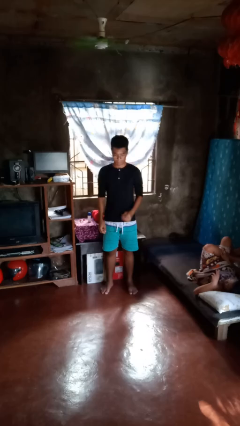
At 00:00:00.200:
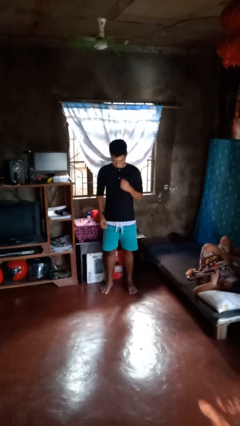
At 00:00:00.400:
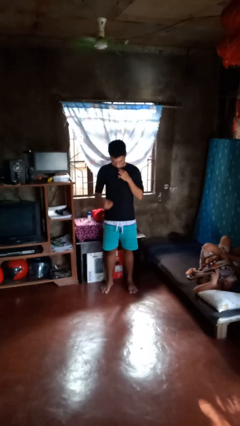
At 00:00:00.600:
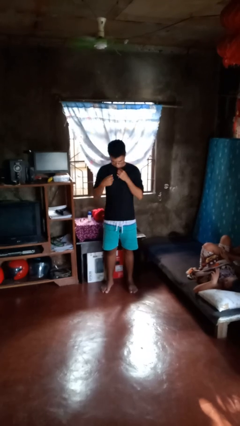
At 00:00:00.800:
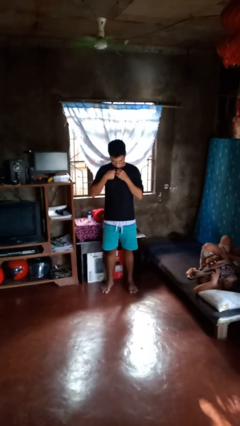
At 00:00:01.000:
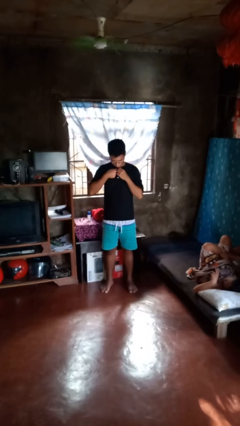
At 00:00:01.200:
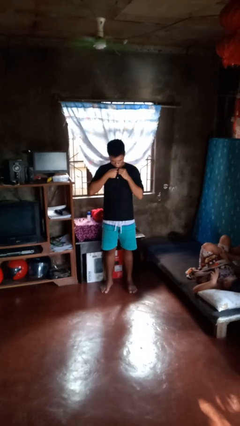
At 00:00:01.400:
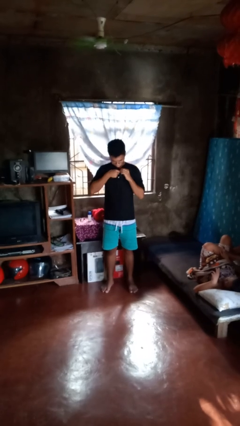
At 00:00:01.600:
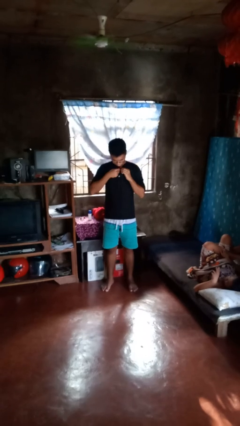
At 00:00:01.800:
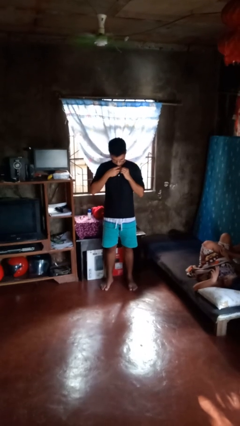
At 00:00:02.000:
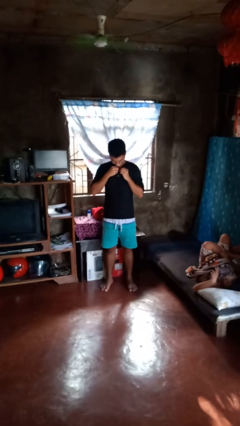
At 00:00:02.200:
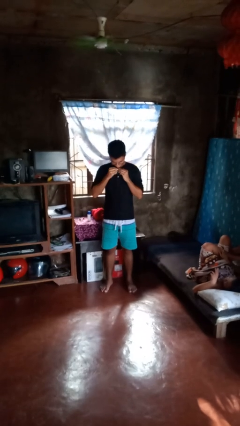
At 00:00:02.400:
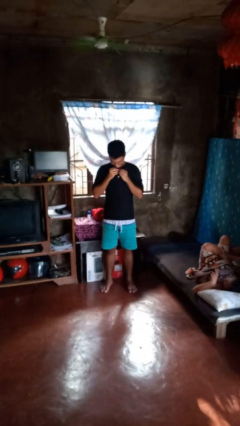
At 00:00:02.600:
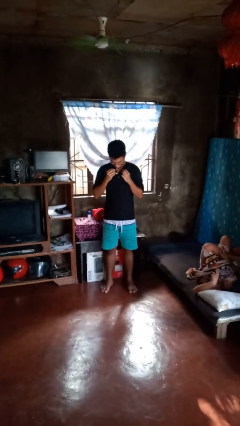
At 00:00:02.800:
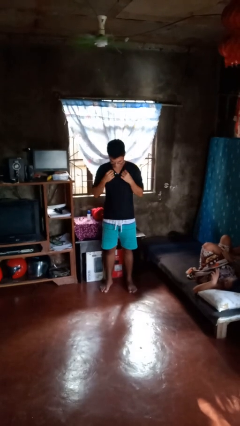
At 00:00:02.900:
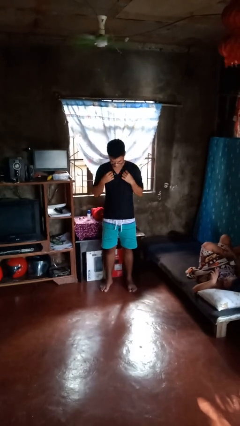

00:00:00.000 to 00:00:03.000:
person unbuttons shirt

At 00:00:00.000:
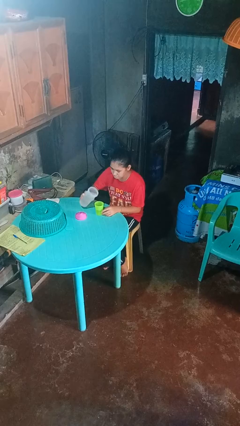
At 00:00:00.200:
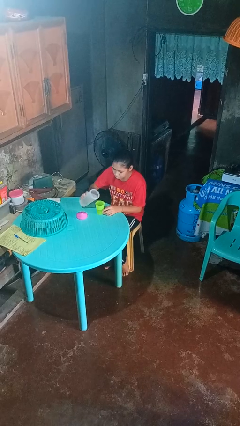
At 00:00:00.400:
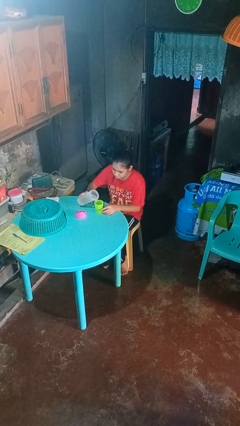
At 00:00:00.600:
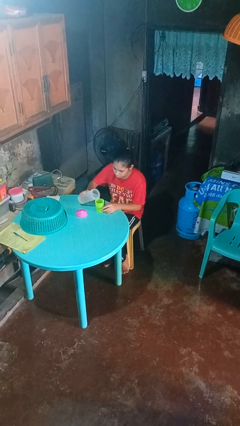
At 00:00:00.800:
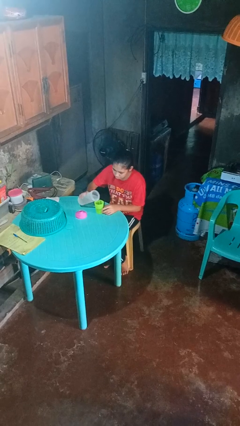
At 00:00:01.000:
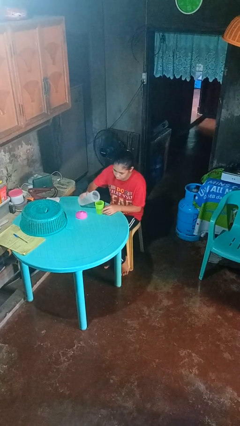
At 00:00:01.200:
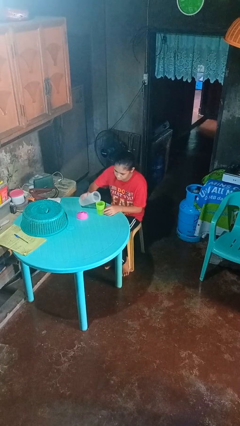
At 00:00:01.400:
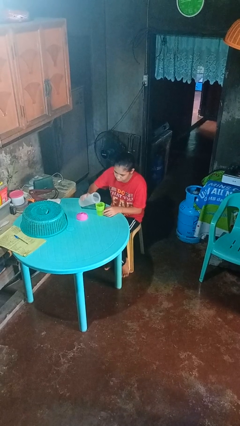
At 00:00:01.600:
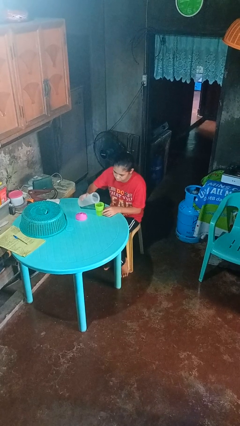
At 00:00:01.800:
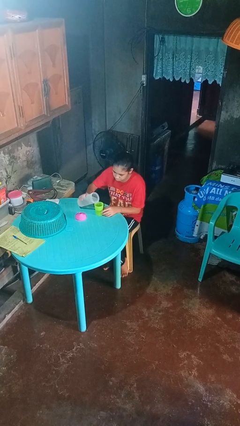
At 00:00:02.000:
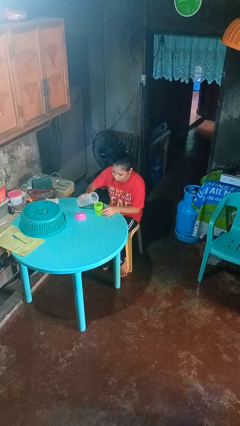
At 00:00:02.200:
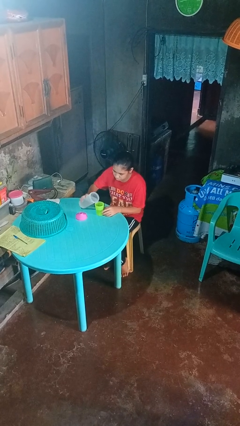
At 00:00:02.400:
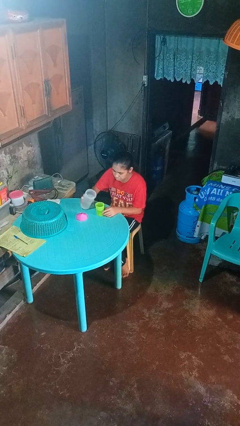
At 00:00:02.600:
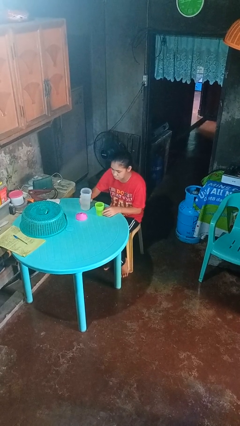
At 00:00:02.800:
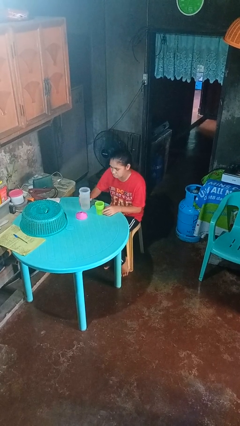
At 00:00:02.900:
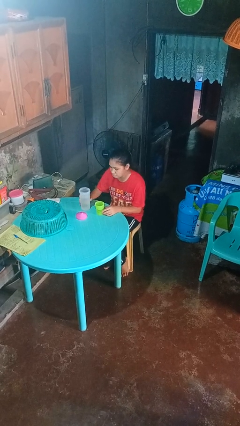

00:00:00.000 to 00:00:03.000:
person pours liquid into cup

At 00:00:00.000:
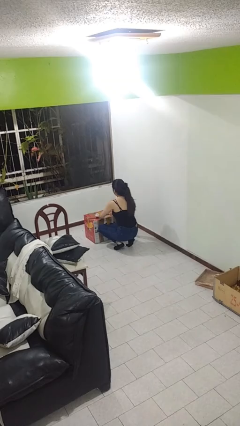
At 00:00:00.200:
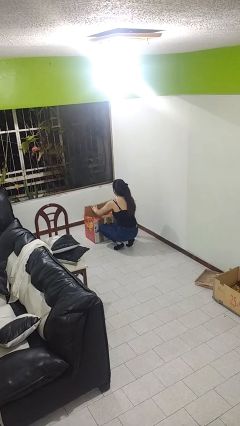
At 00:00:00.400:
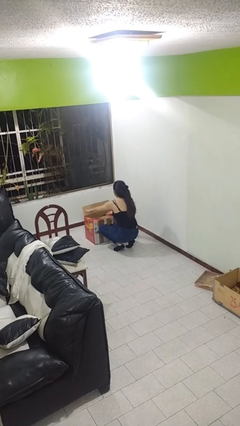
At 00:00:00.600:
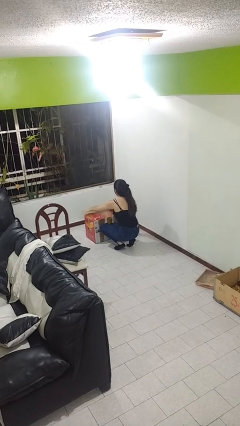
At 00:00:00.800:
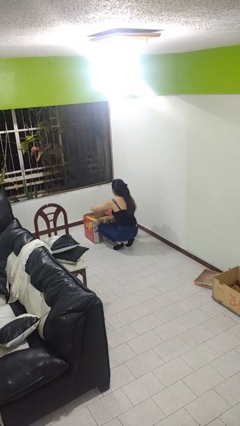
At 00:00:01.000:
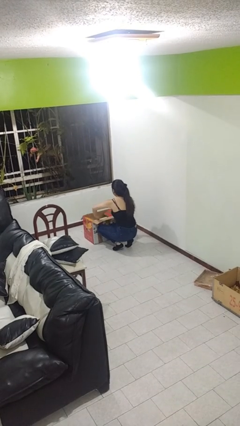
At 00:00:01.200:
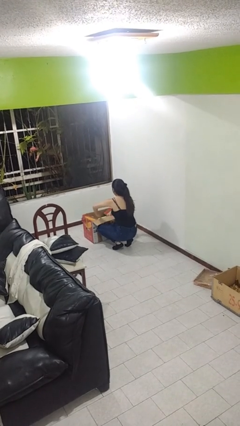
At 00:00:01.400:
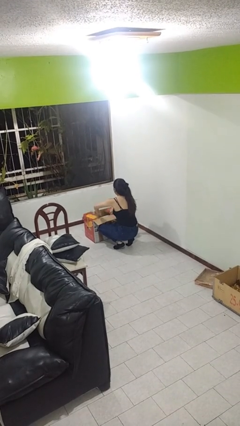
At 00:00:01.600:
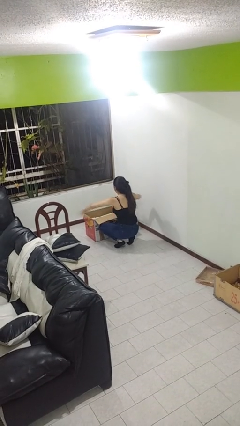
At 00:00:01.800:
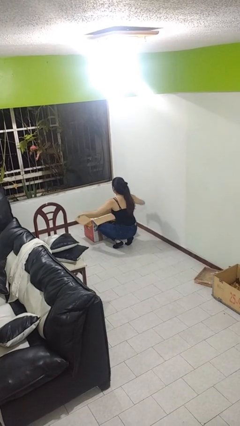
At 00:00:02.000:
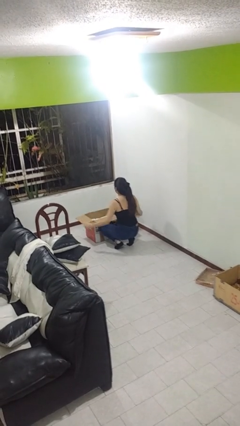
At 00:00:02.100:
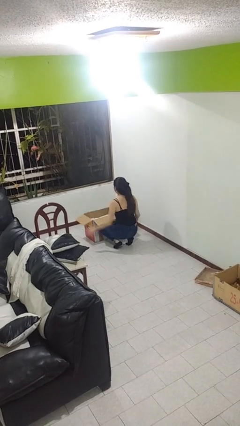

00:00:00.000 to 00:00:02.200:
person opens box

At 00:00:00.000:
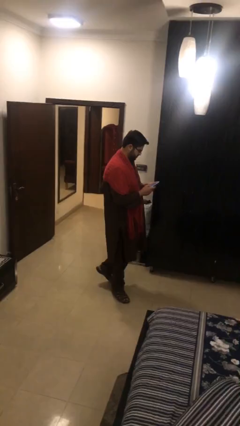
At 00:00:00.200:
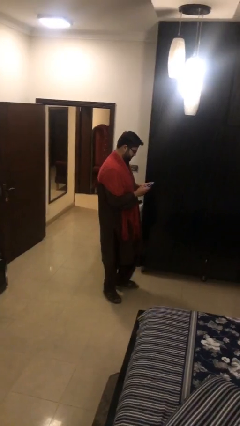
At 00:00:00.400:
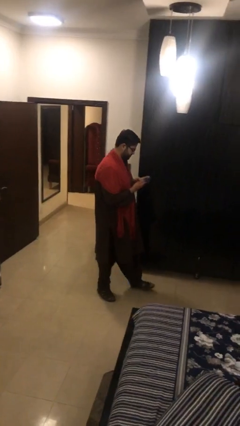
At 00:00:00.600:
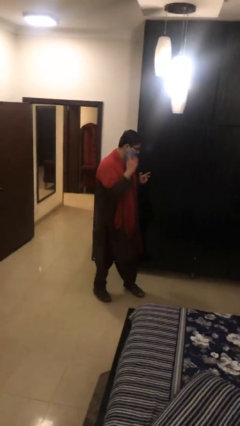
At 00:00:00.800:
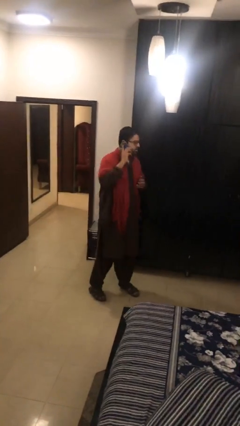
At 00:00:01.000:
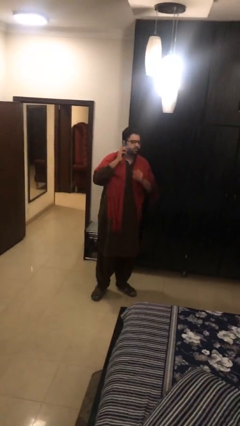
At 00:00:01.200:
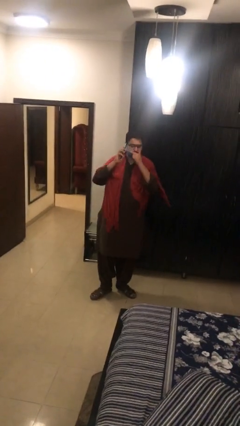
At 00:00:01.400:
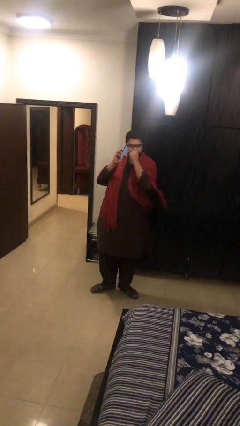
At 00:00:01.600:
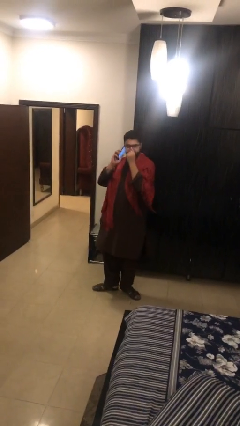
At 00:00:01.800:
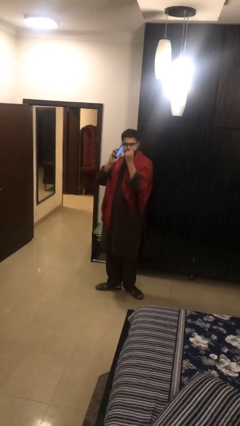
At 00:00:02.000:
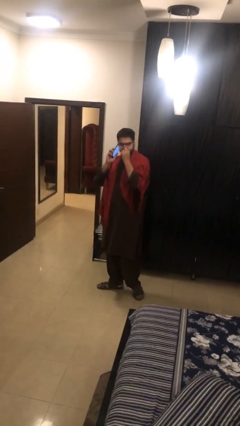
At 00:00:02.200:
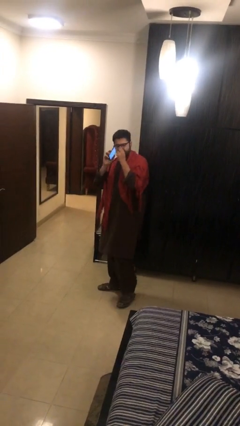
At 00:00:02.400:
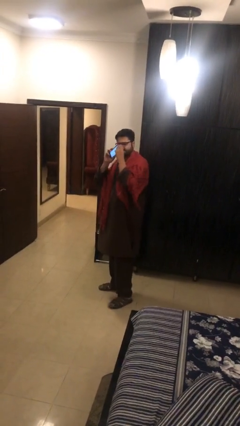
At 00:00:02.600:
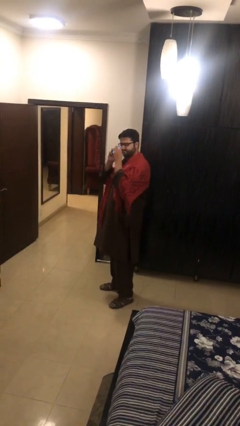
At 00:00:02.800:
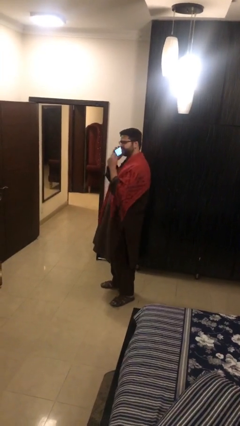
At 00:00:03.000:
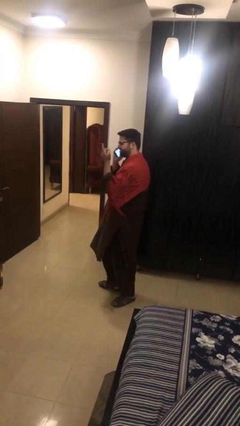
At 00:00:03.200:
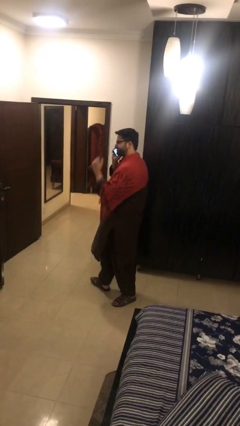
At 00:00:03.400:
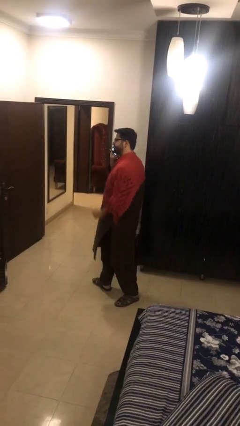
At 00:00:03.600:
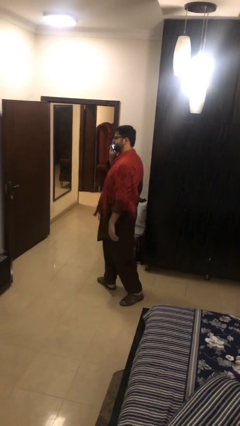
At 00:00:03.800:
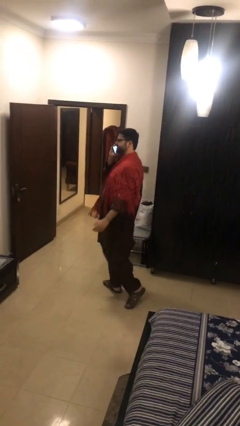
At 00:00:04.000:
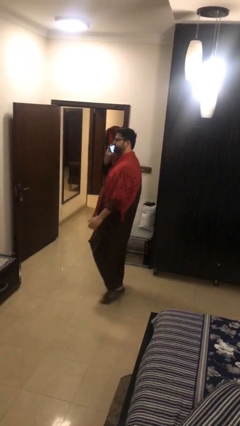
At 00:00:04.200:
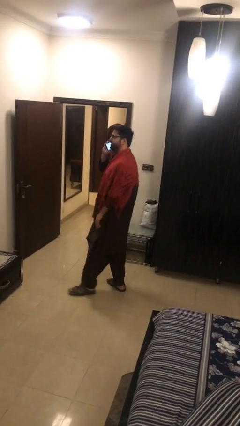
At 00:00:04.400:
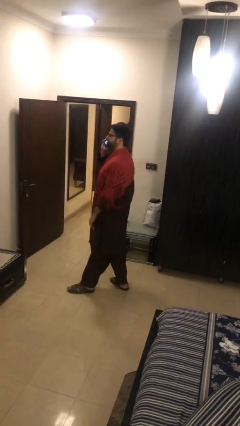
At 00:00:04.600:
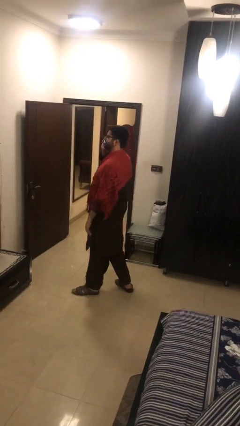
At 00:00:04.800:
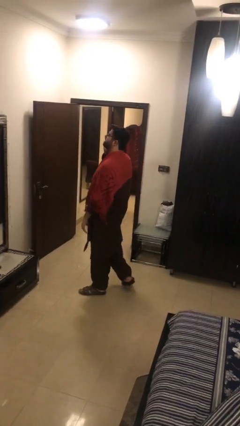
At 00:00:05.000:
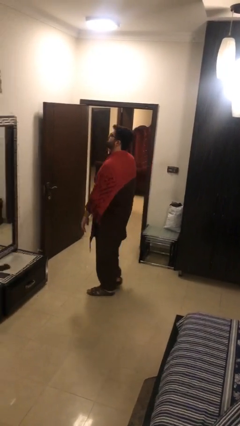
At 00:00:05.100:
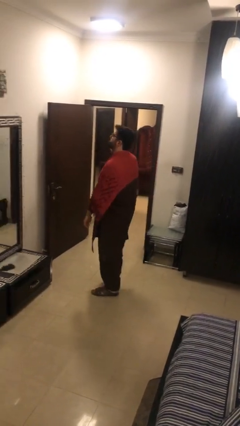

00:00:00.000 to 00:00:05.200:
person talks on phone

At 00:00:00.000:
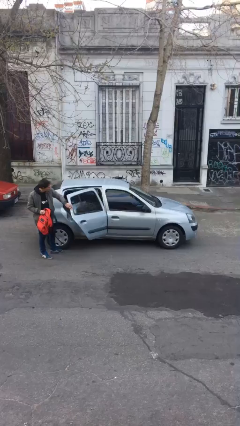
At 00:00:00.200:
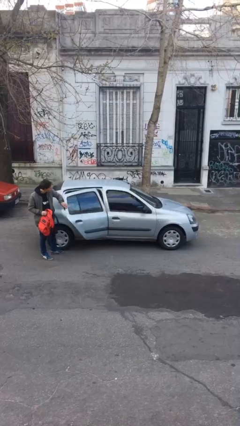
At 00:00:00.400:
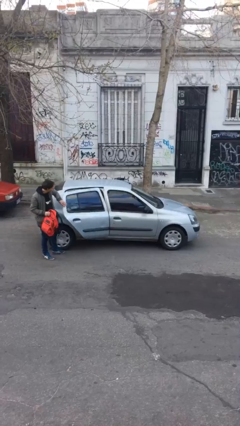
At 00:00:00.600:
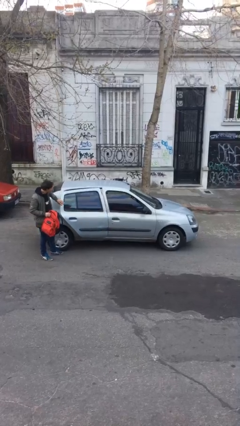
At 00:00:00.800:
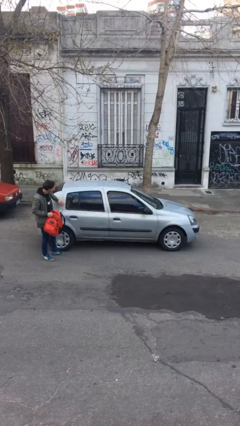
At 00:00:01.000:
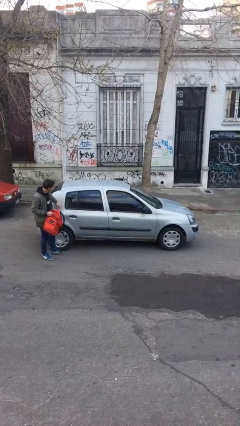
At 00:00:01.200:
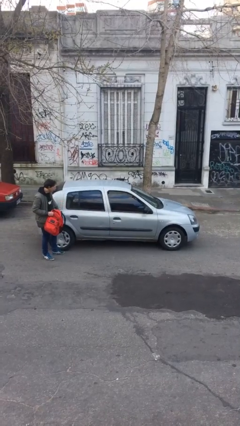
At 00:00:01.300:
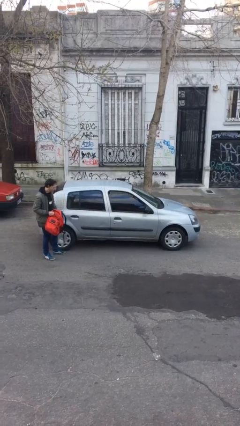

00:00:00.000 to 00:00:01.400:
person closes car door

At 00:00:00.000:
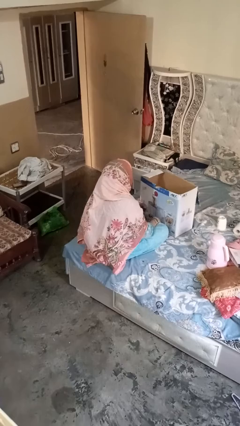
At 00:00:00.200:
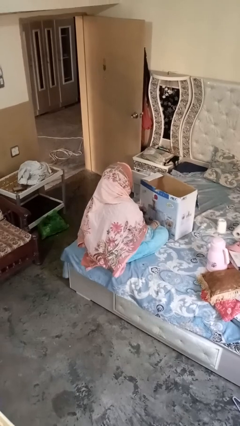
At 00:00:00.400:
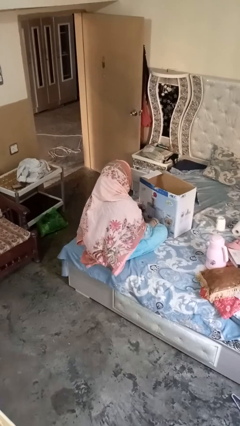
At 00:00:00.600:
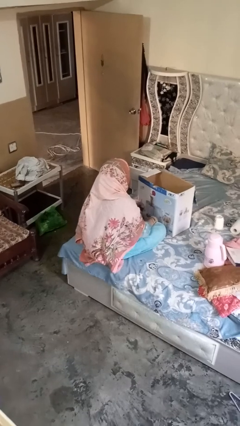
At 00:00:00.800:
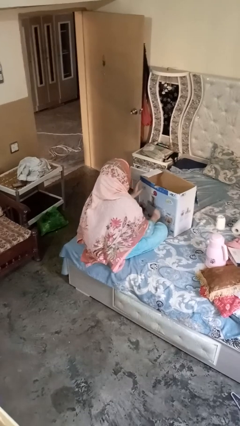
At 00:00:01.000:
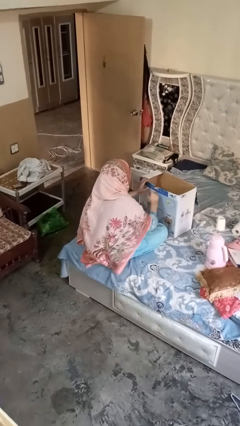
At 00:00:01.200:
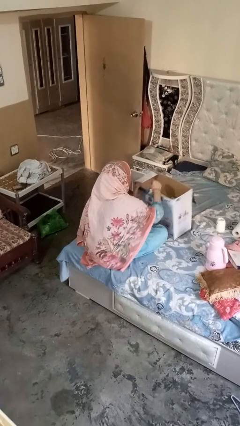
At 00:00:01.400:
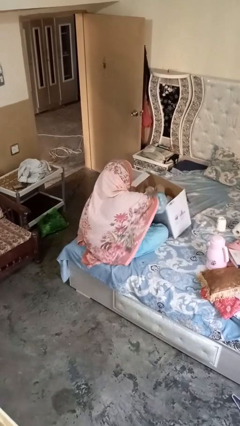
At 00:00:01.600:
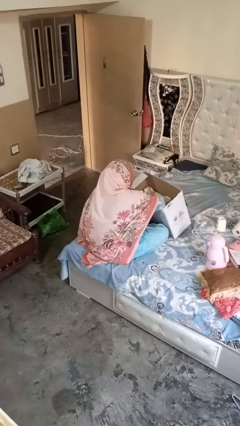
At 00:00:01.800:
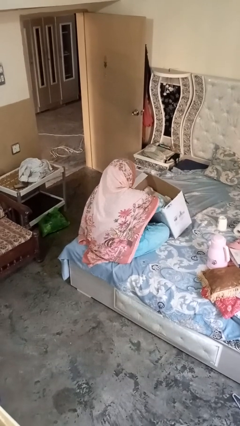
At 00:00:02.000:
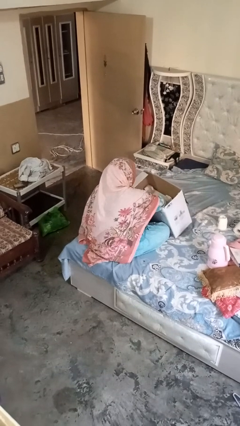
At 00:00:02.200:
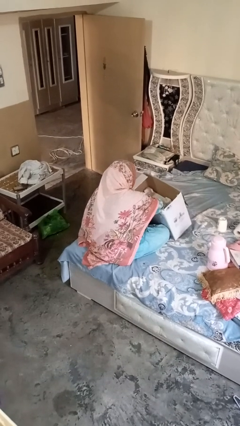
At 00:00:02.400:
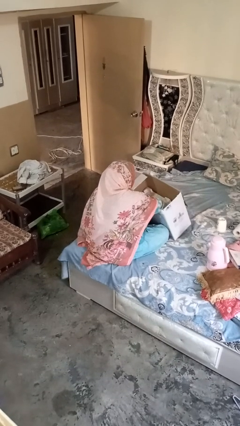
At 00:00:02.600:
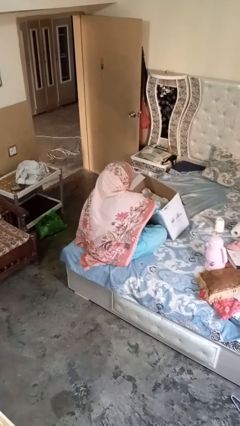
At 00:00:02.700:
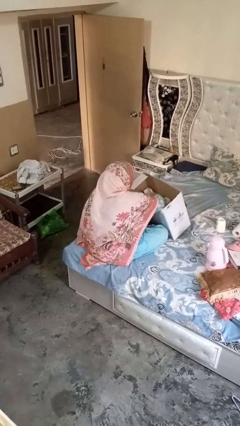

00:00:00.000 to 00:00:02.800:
person searches in box
